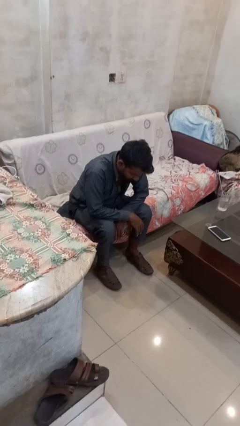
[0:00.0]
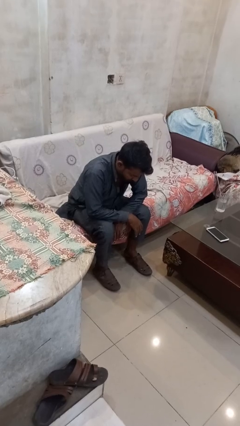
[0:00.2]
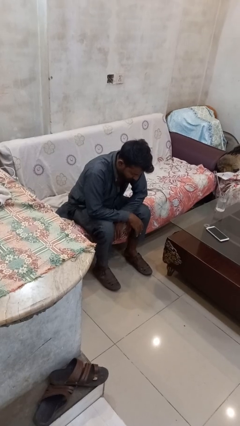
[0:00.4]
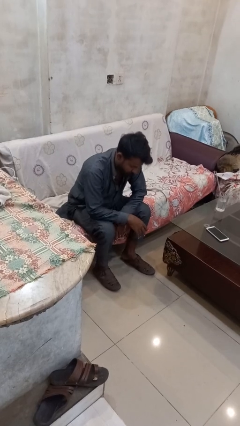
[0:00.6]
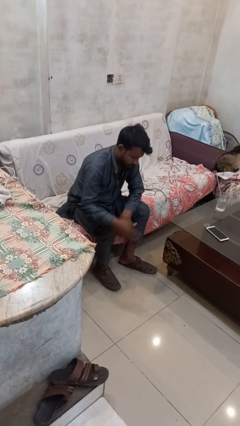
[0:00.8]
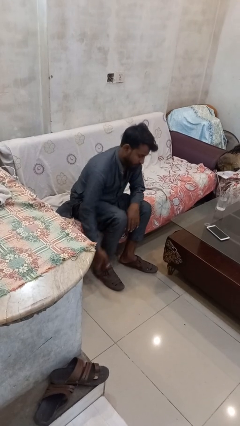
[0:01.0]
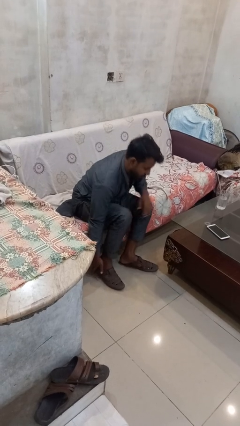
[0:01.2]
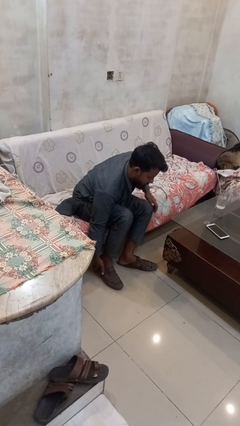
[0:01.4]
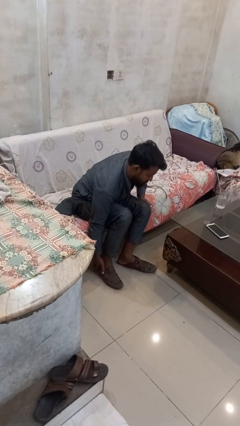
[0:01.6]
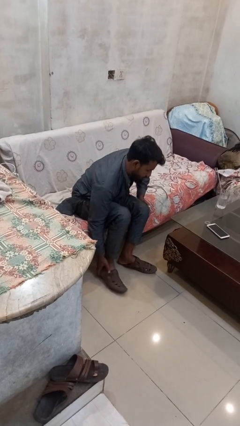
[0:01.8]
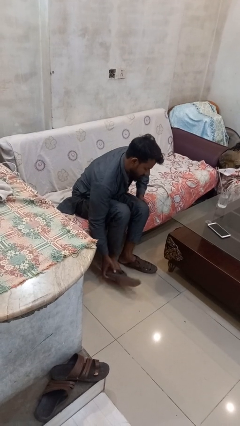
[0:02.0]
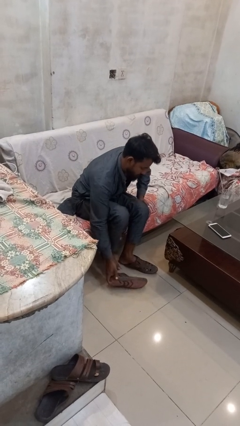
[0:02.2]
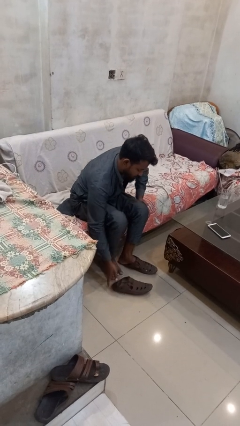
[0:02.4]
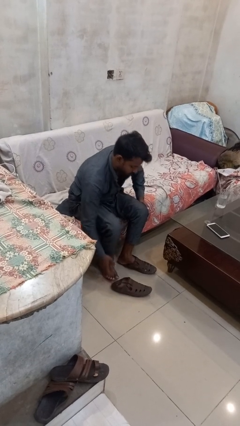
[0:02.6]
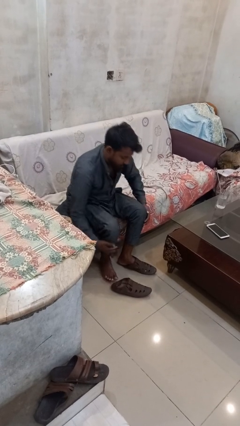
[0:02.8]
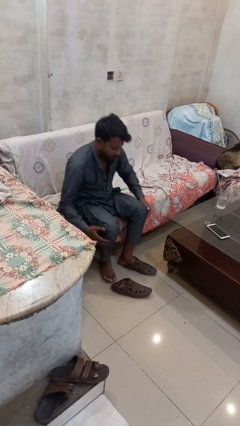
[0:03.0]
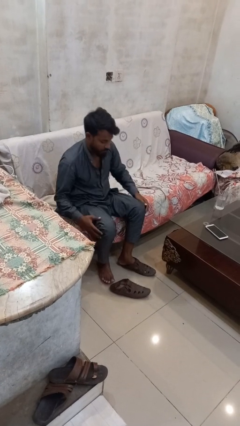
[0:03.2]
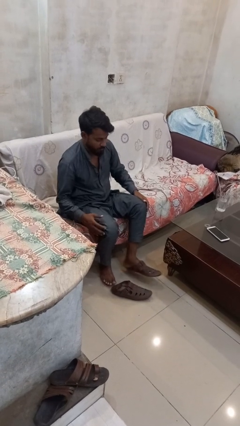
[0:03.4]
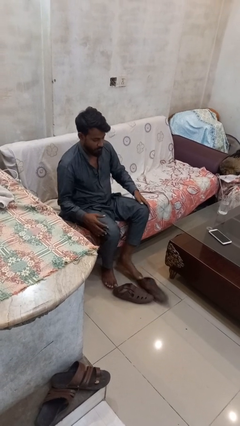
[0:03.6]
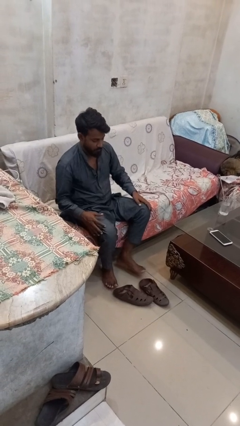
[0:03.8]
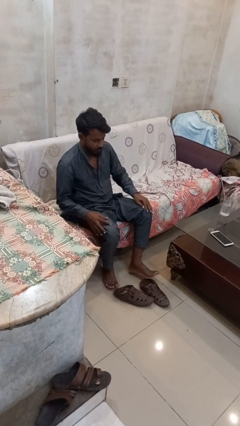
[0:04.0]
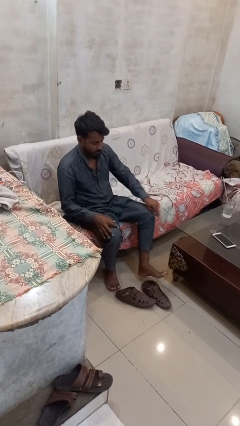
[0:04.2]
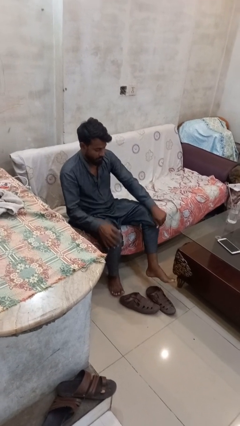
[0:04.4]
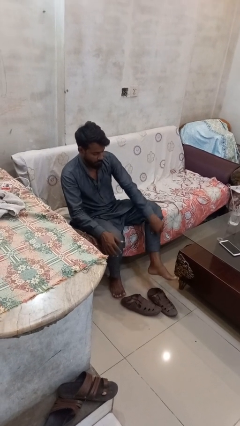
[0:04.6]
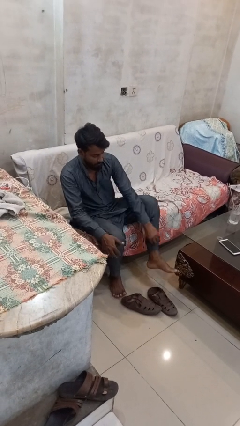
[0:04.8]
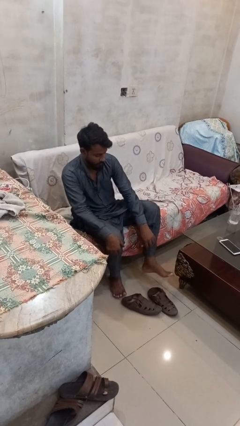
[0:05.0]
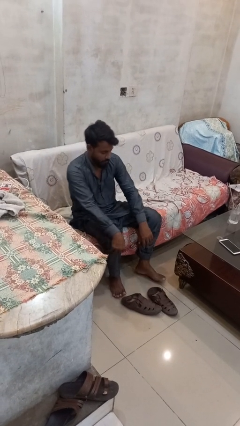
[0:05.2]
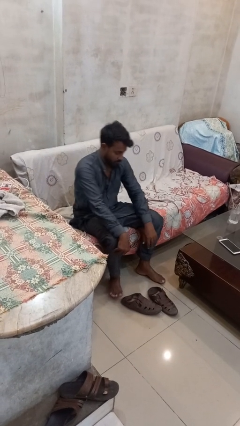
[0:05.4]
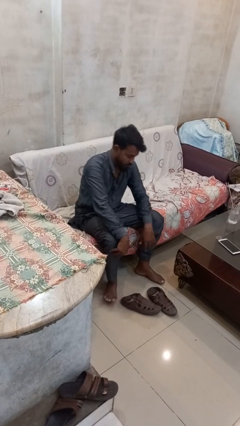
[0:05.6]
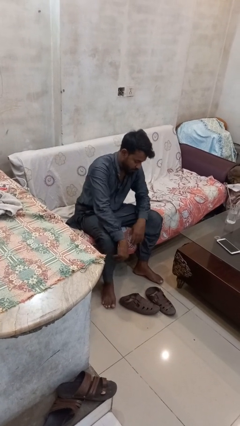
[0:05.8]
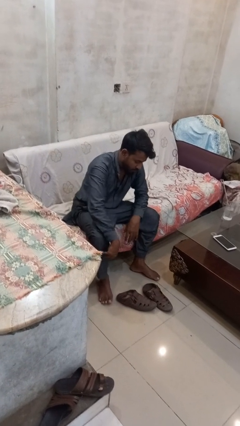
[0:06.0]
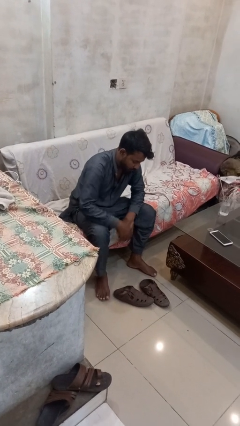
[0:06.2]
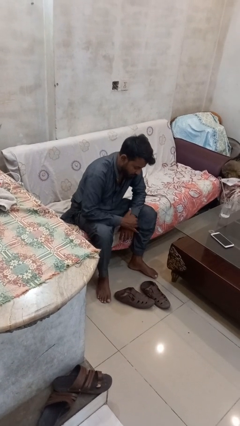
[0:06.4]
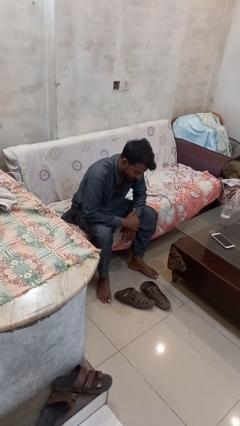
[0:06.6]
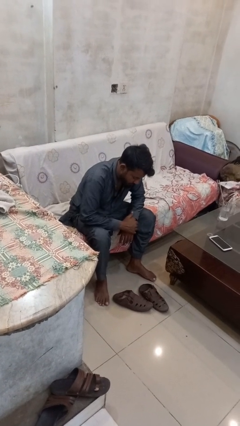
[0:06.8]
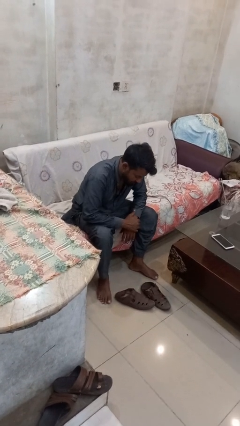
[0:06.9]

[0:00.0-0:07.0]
person takes off shoes

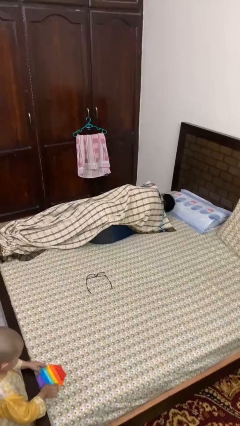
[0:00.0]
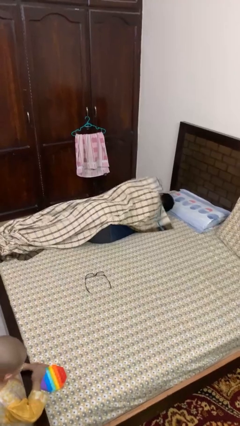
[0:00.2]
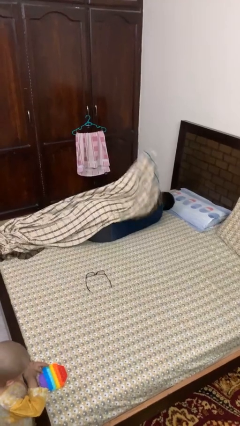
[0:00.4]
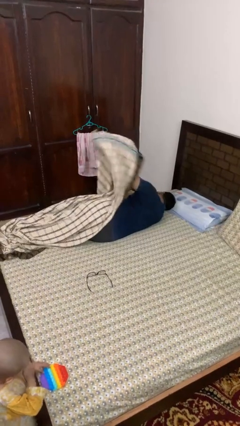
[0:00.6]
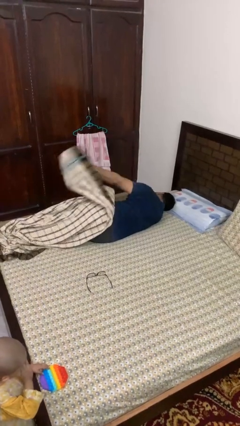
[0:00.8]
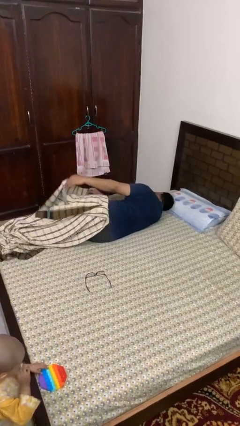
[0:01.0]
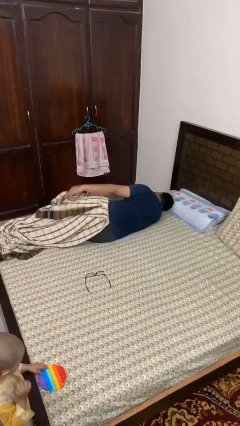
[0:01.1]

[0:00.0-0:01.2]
person uncovers with blanket

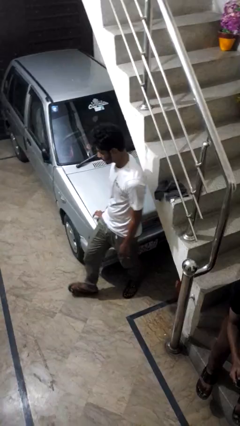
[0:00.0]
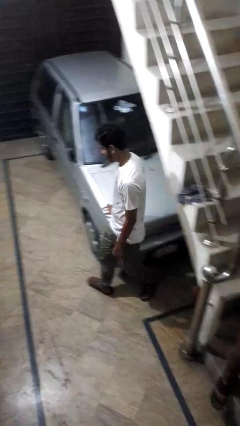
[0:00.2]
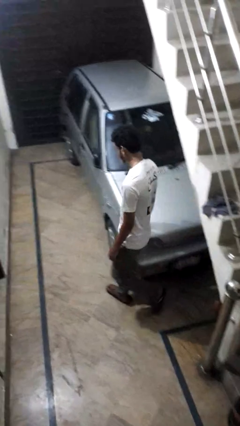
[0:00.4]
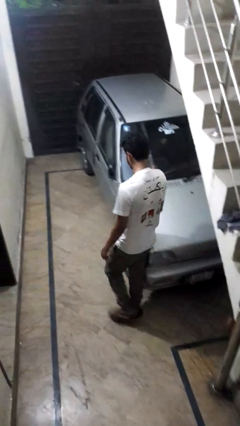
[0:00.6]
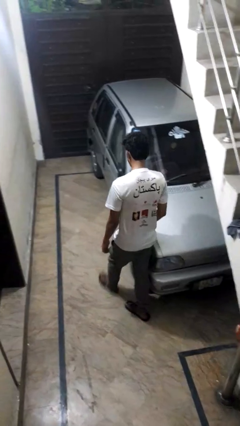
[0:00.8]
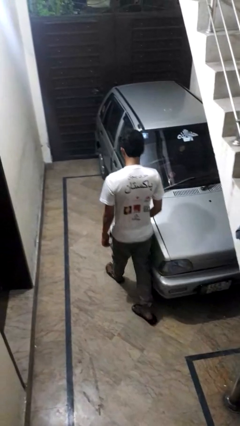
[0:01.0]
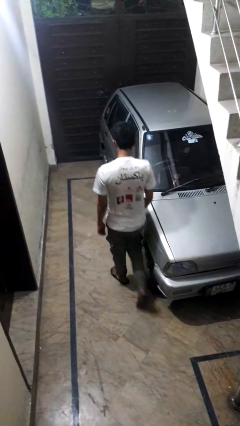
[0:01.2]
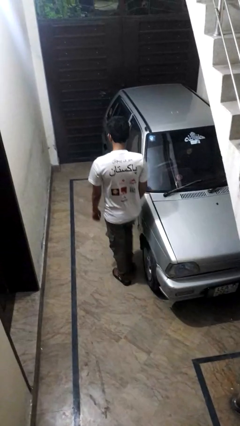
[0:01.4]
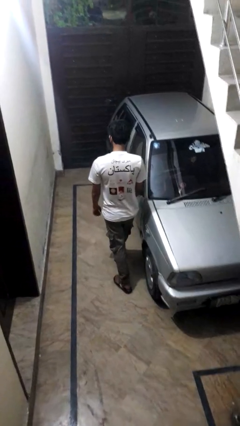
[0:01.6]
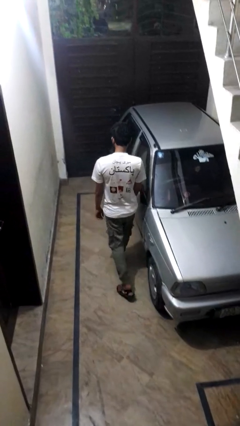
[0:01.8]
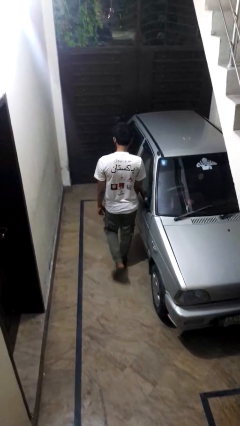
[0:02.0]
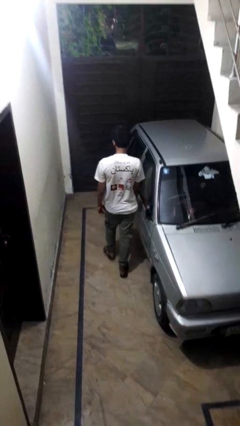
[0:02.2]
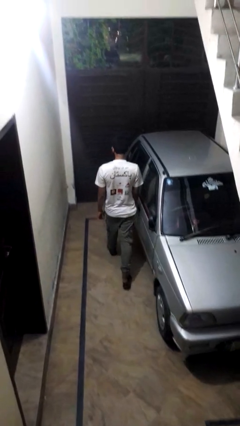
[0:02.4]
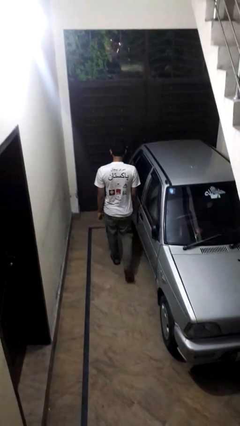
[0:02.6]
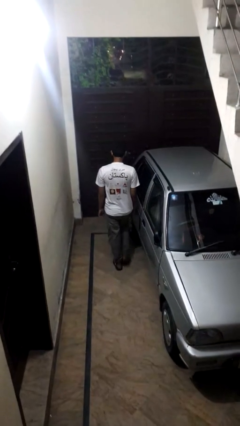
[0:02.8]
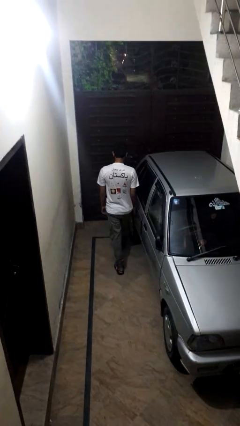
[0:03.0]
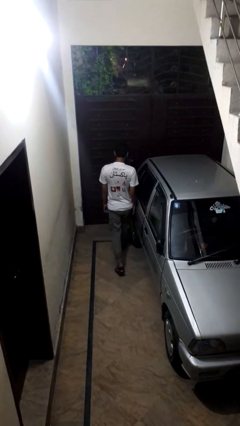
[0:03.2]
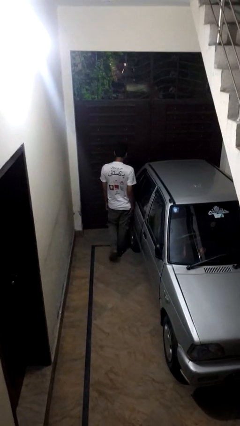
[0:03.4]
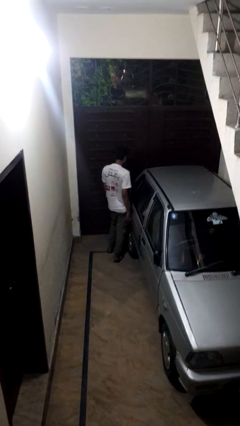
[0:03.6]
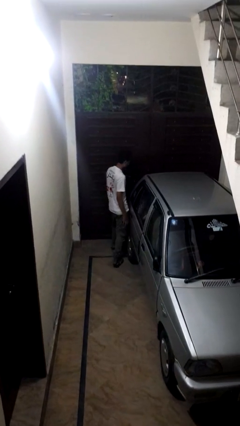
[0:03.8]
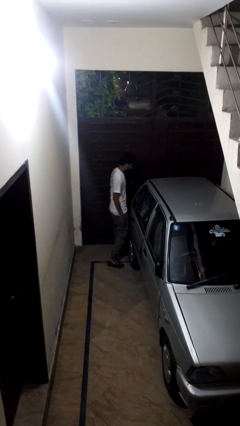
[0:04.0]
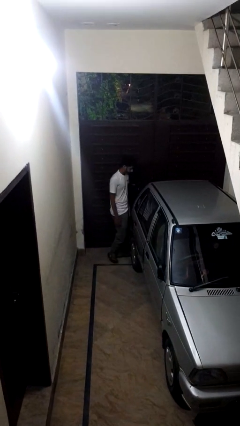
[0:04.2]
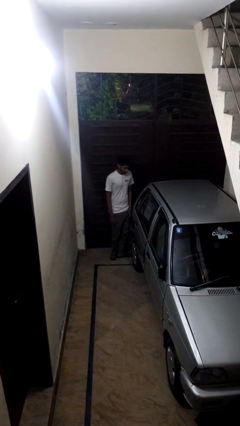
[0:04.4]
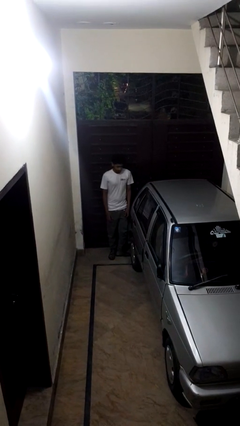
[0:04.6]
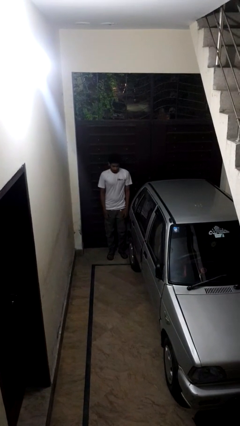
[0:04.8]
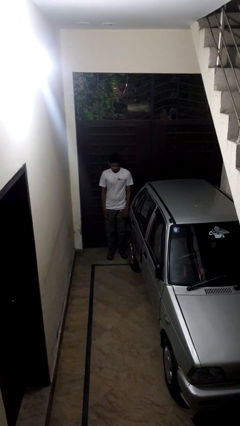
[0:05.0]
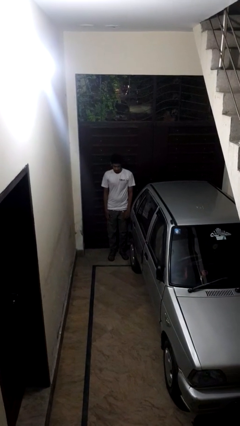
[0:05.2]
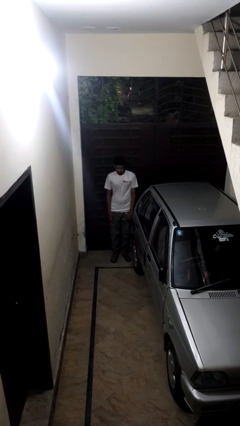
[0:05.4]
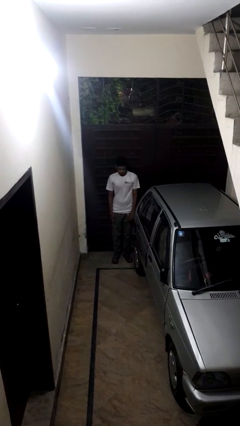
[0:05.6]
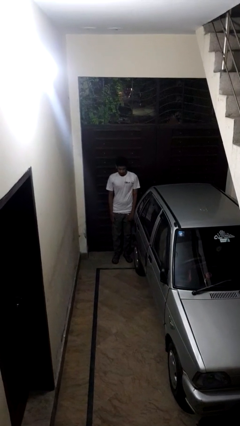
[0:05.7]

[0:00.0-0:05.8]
person walks around car

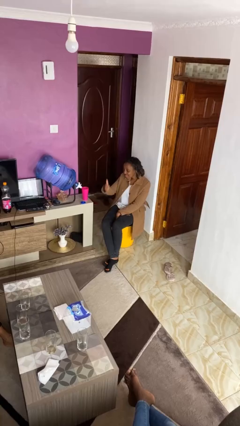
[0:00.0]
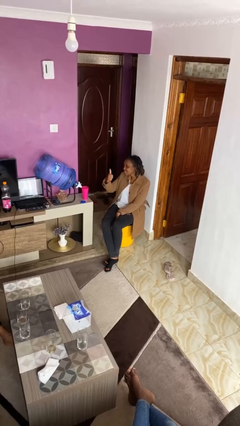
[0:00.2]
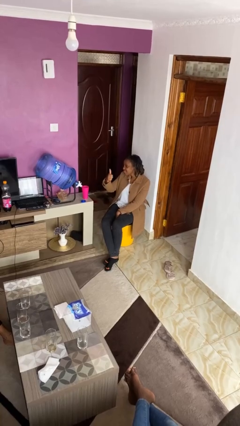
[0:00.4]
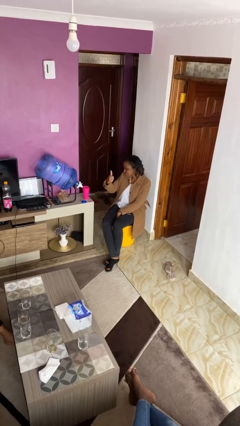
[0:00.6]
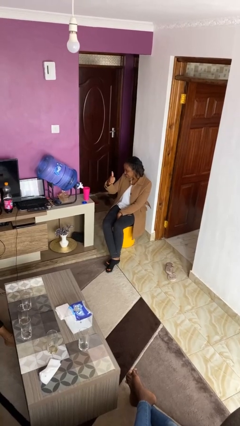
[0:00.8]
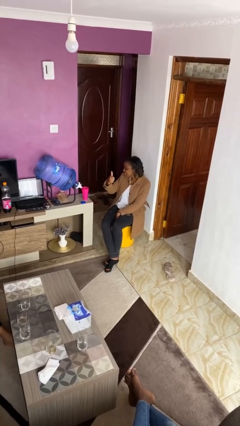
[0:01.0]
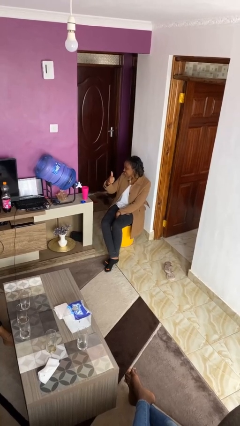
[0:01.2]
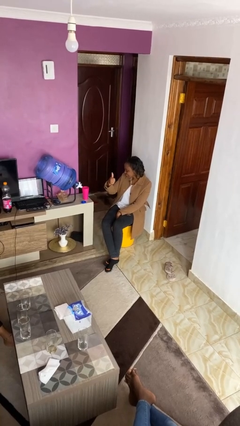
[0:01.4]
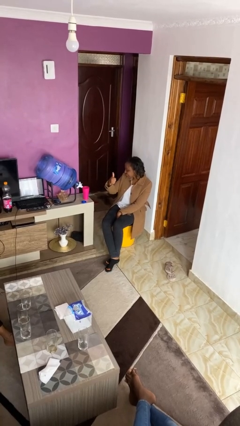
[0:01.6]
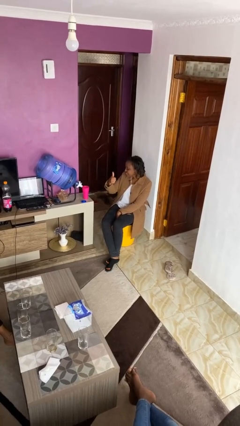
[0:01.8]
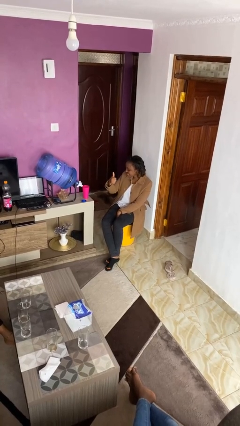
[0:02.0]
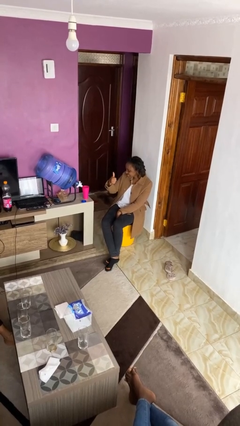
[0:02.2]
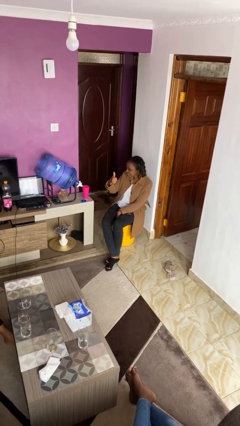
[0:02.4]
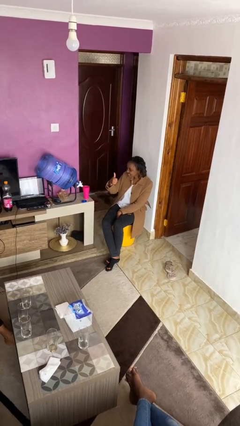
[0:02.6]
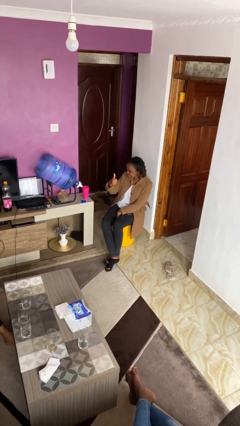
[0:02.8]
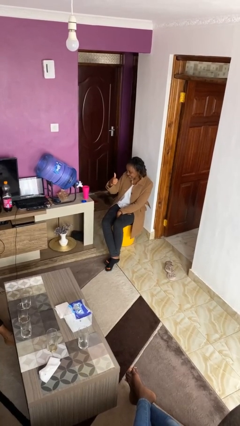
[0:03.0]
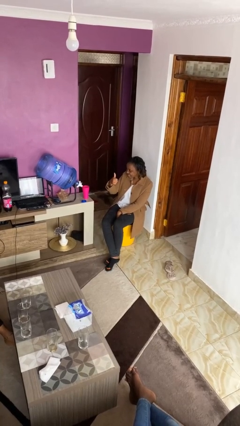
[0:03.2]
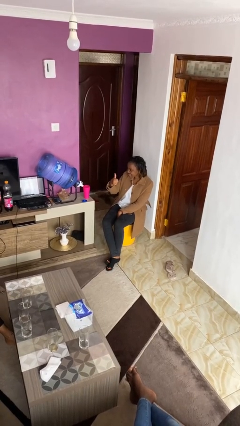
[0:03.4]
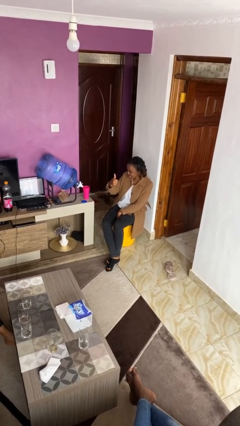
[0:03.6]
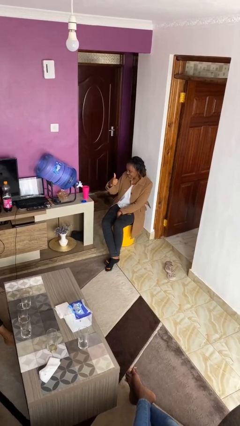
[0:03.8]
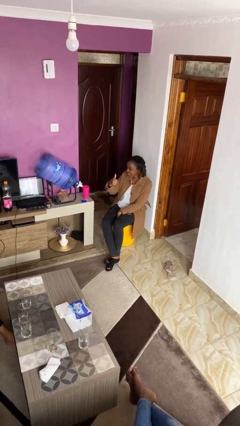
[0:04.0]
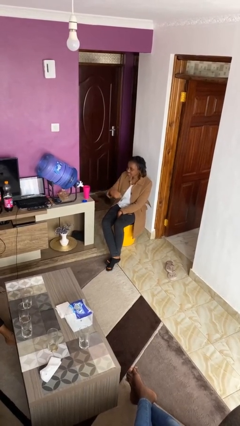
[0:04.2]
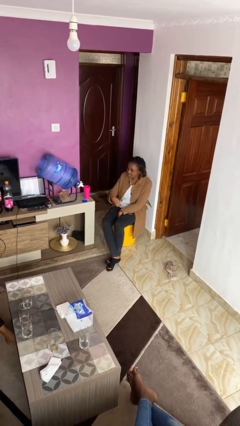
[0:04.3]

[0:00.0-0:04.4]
person gestures thumbs up
